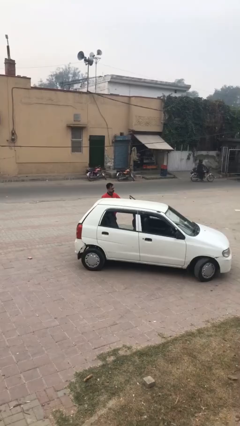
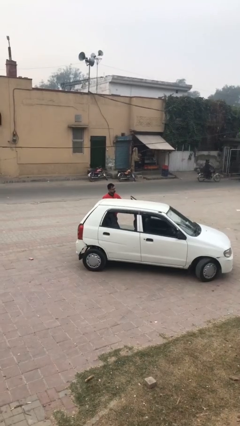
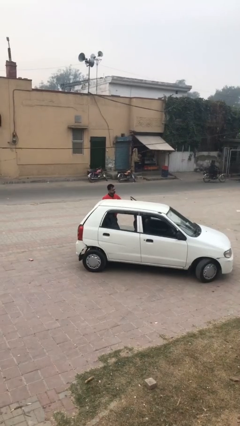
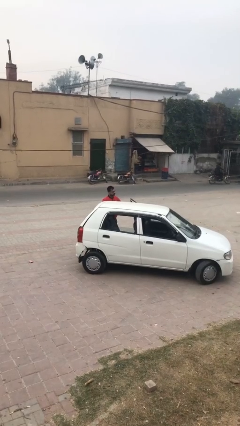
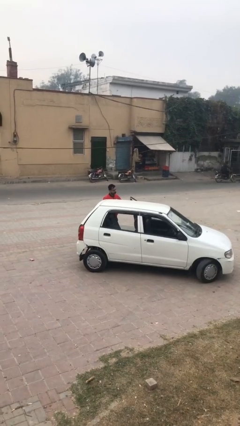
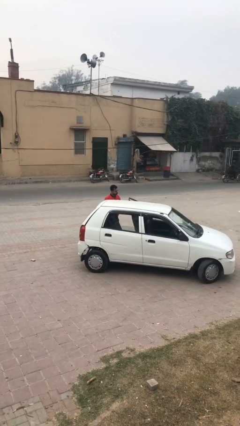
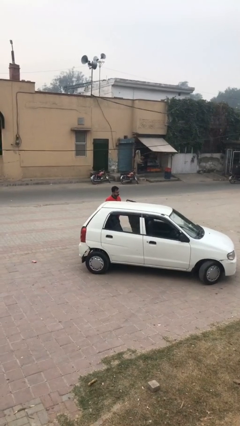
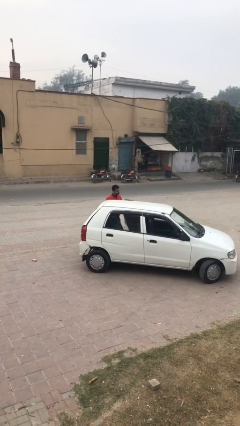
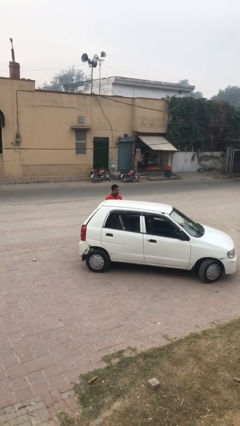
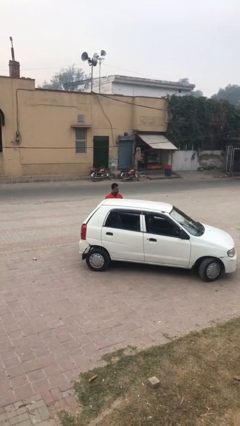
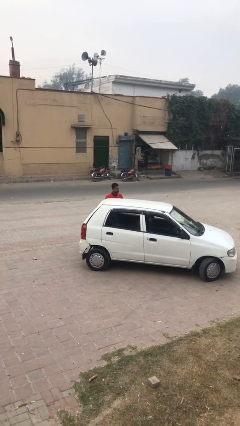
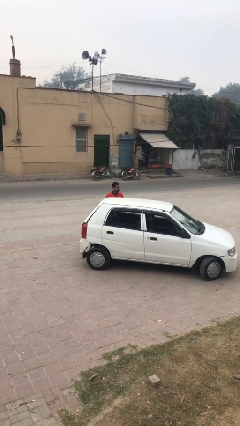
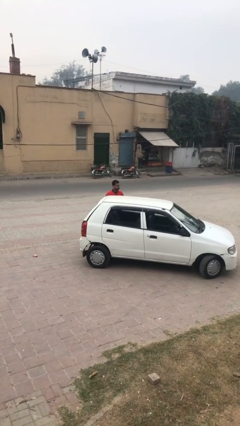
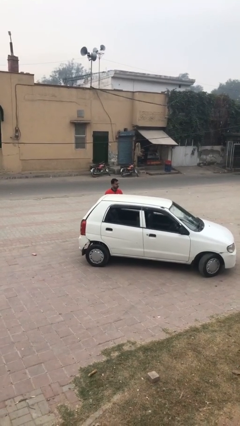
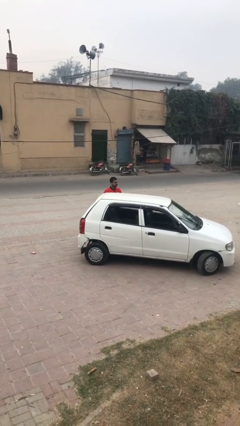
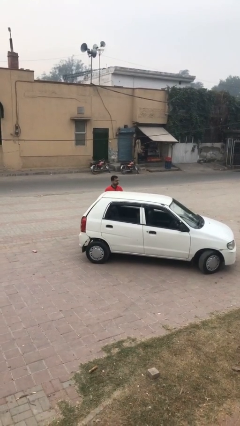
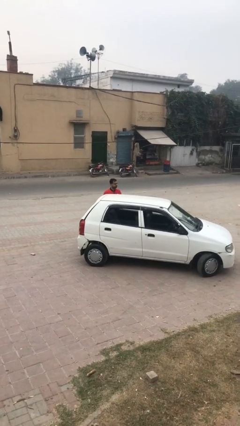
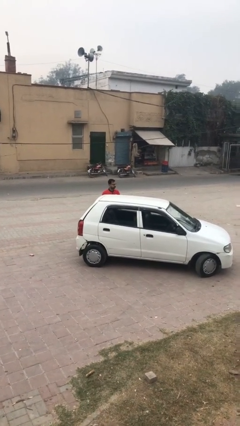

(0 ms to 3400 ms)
person closes car door

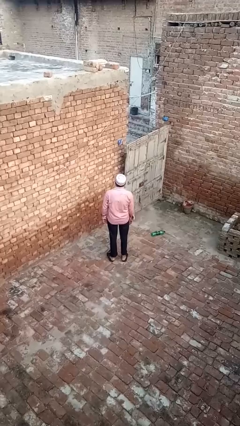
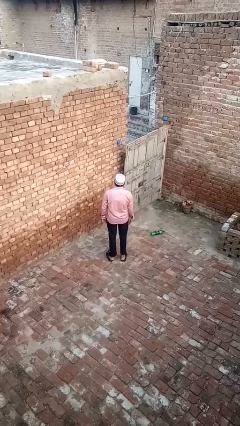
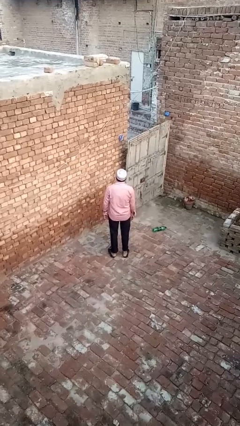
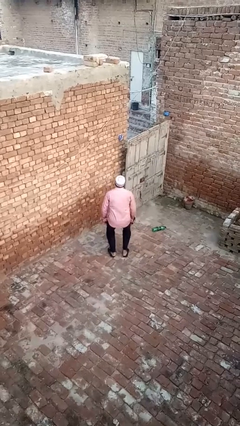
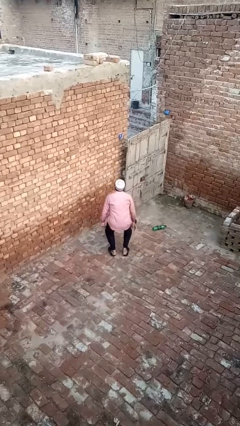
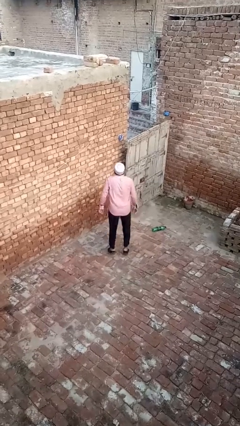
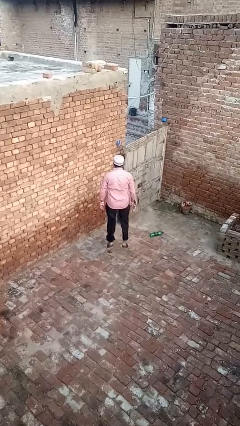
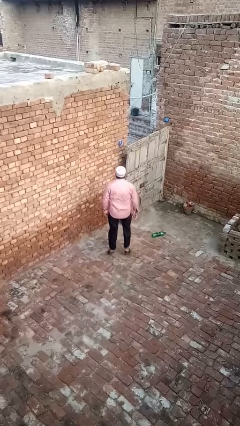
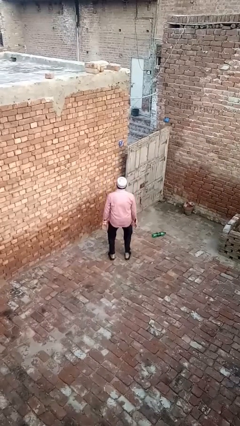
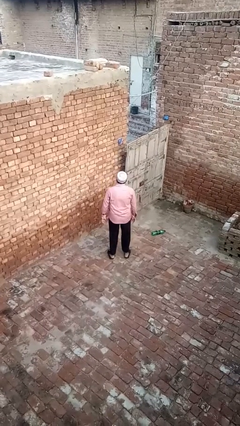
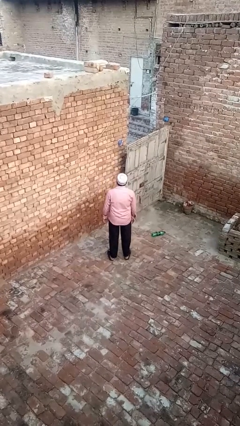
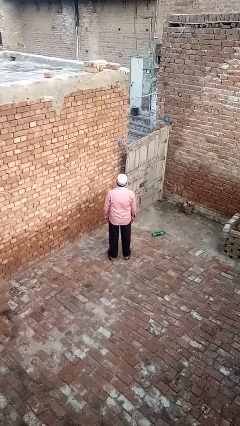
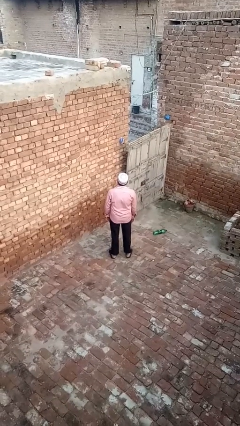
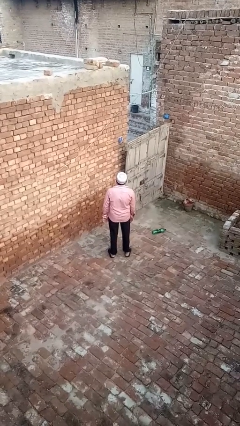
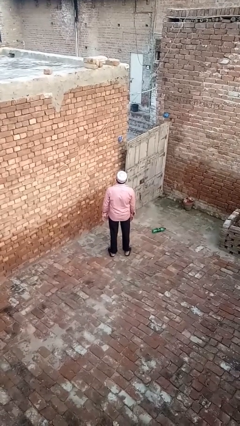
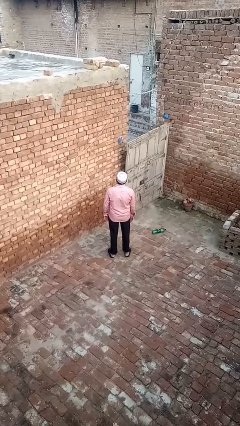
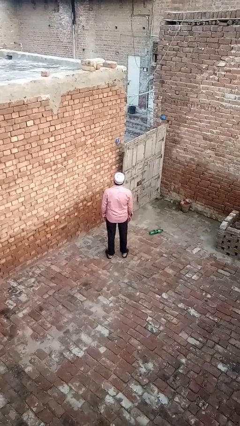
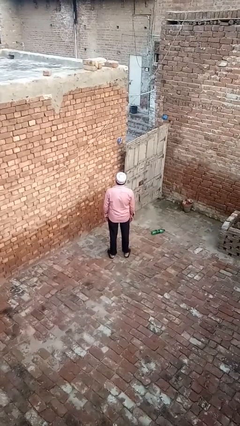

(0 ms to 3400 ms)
person jumps

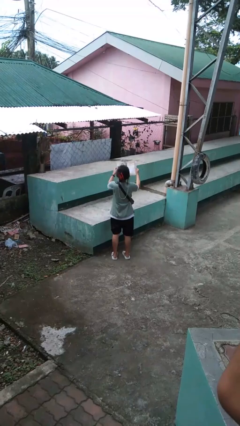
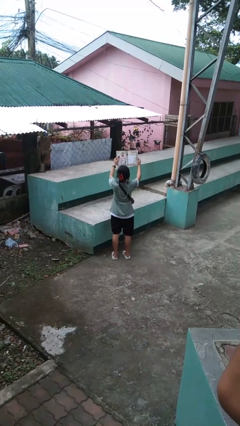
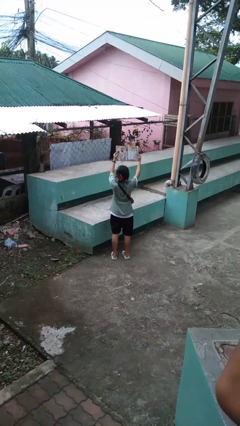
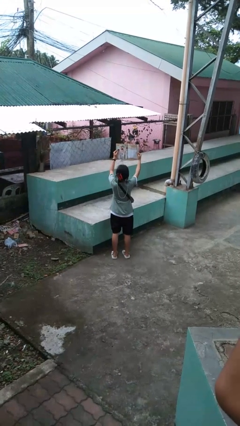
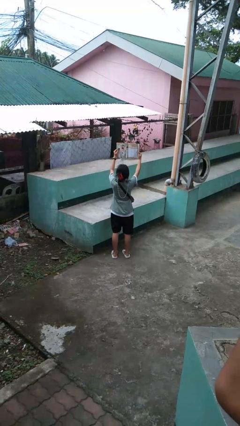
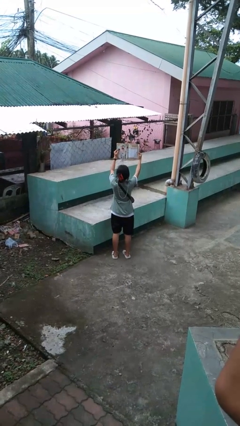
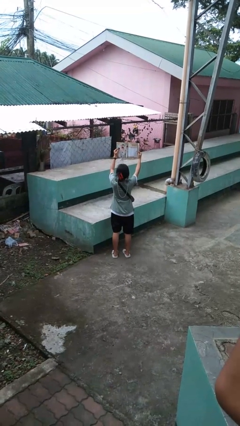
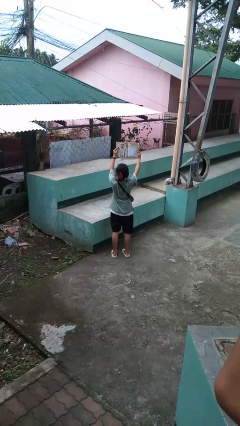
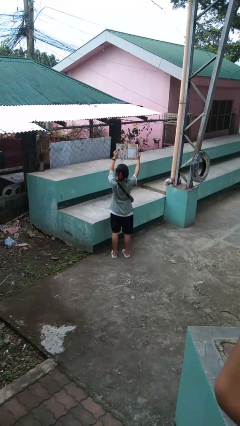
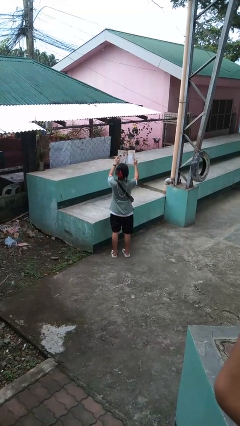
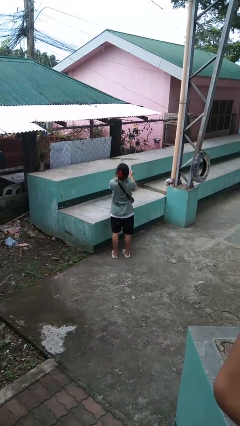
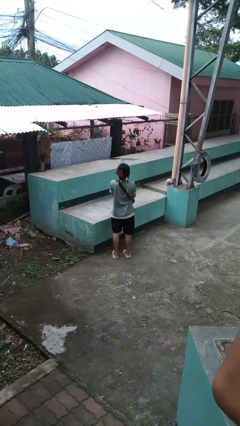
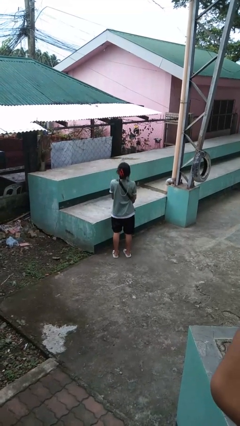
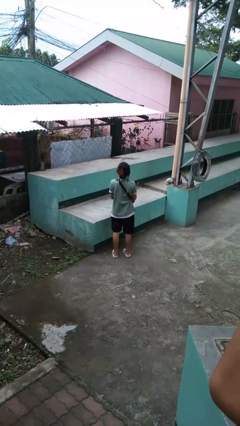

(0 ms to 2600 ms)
person reads magazine

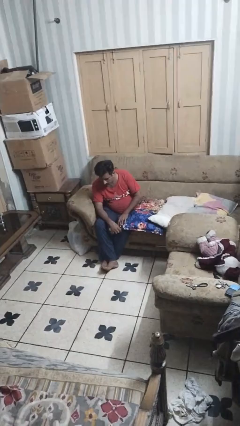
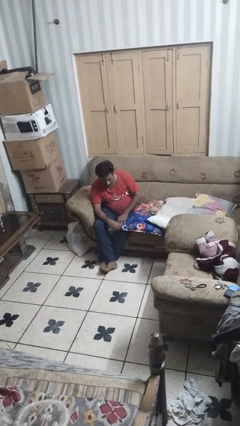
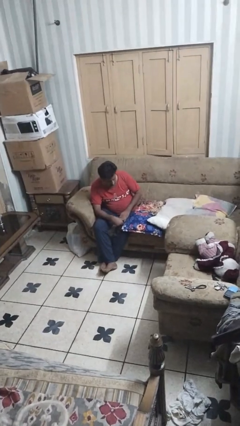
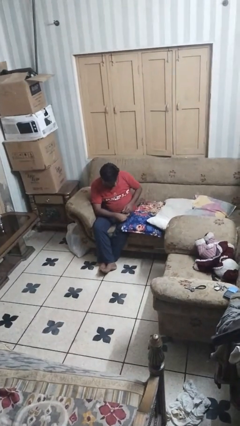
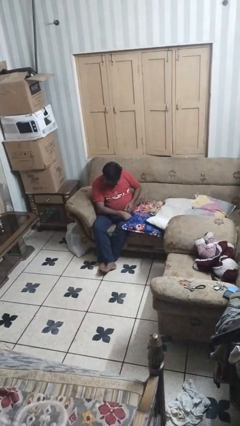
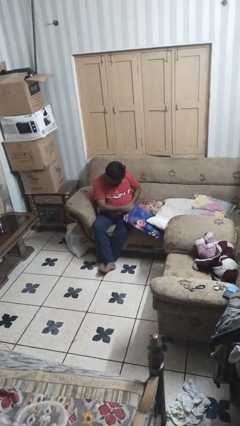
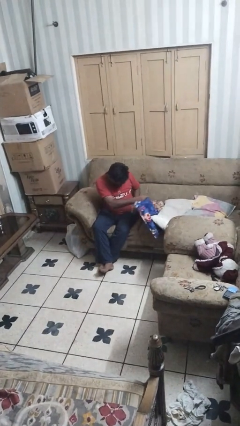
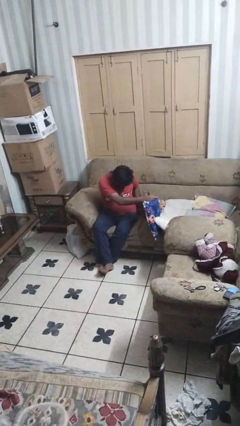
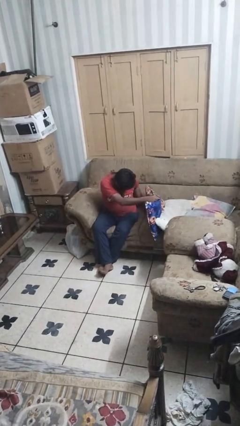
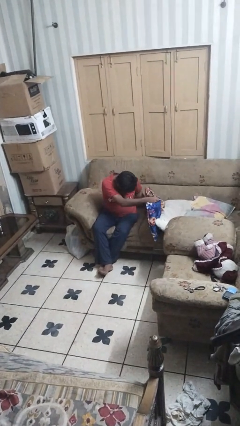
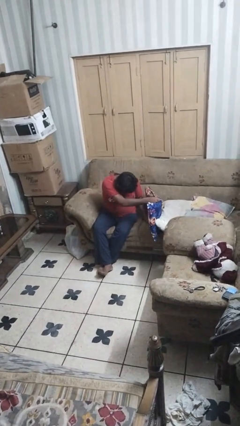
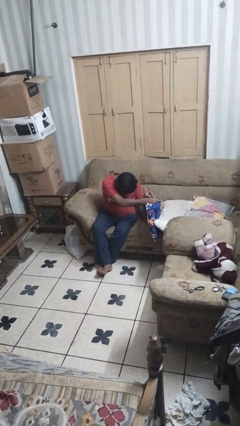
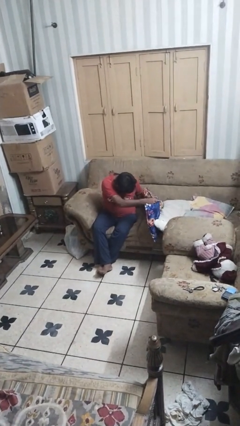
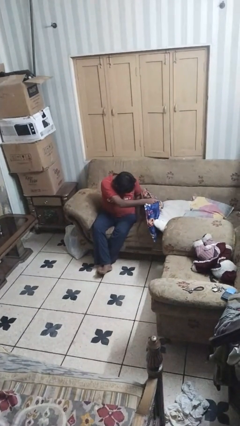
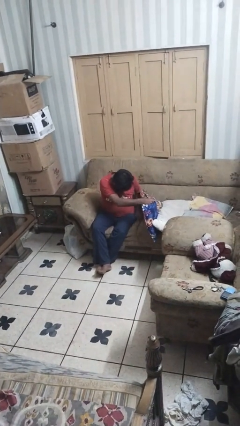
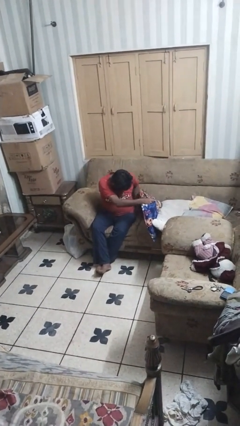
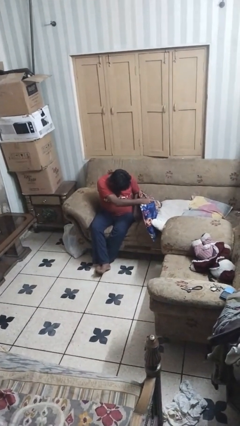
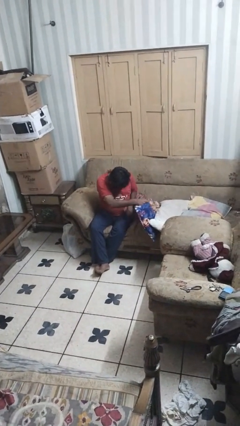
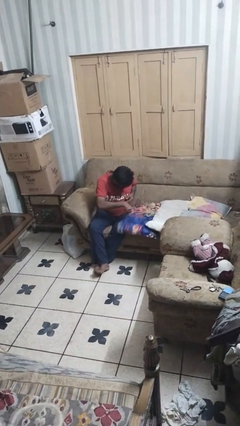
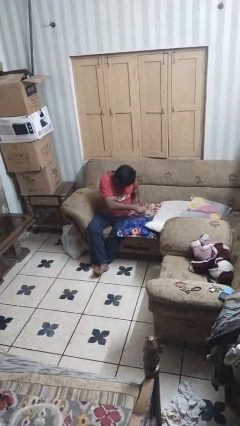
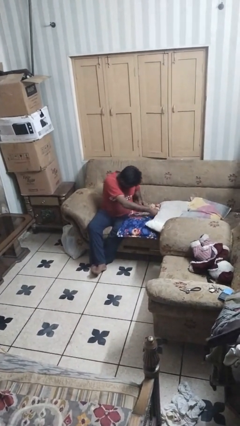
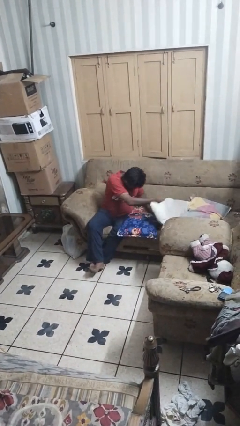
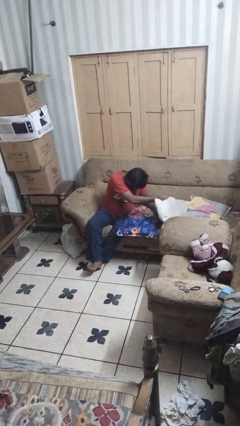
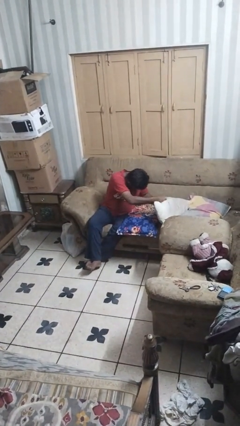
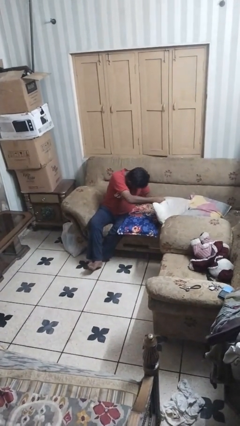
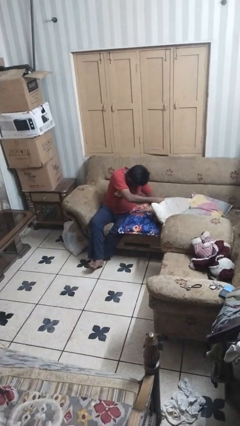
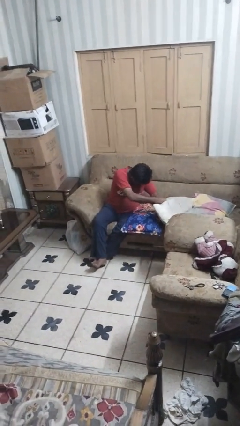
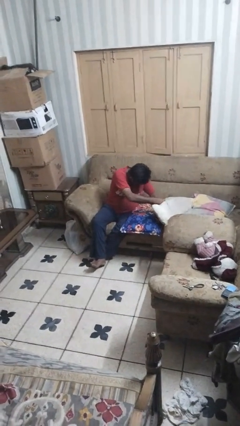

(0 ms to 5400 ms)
person searches in couch

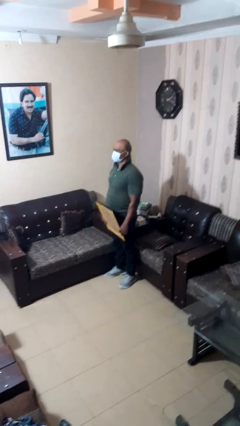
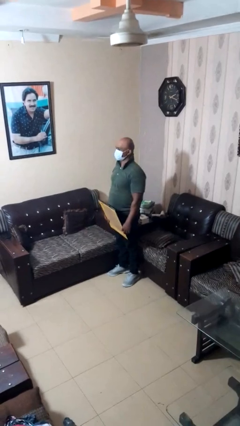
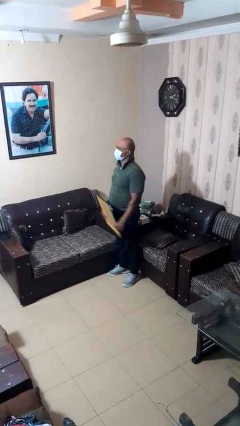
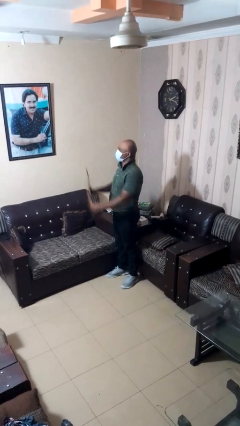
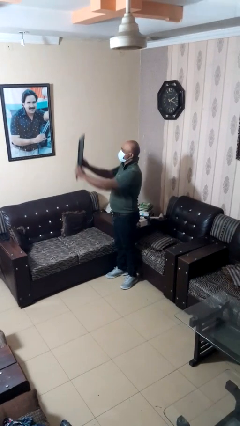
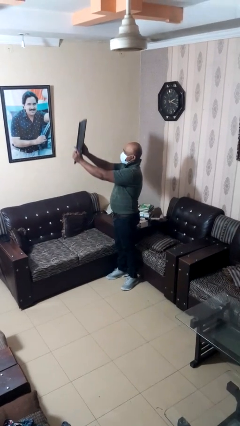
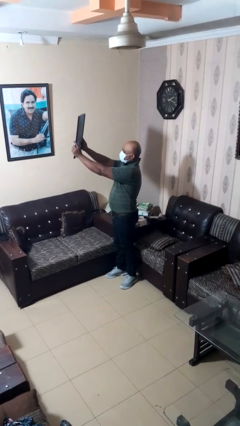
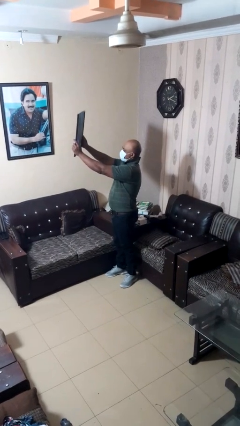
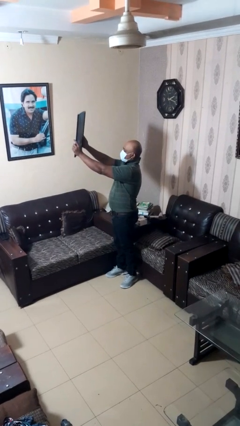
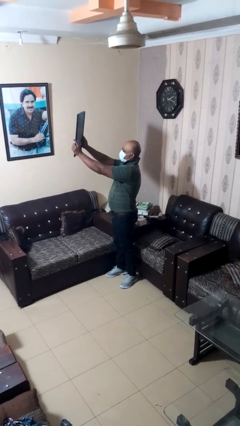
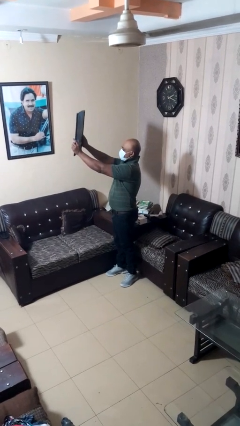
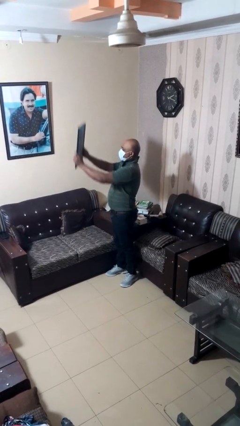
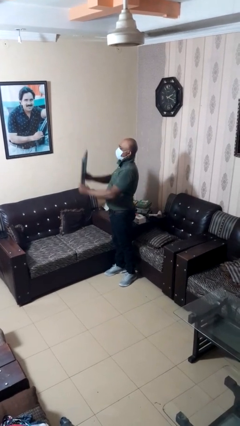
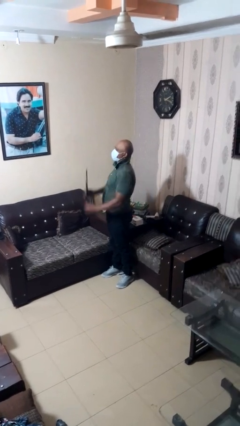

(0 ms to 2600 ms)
person holds object above head
